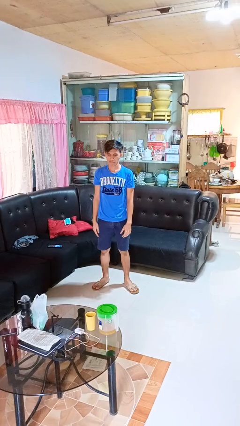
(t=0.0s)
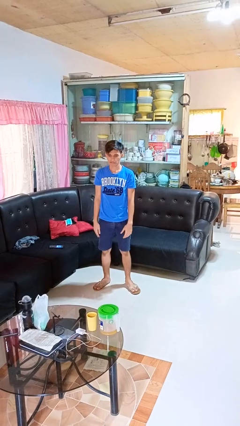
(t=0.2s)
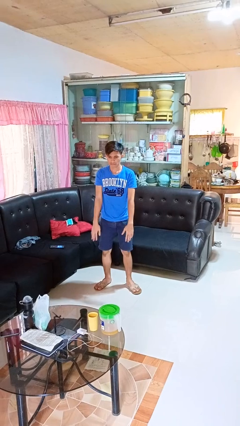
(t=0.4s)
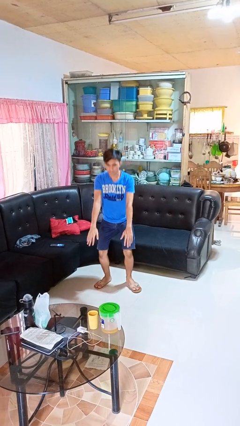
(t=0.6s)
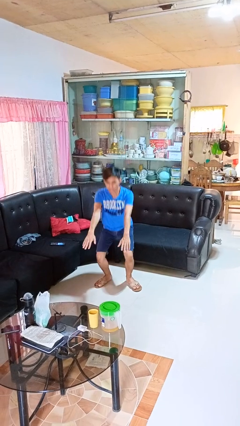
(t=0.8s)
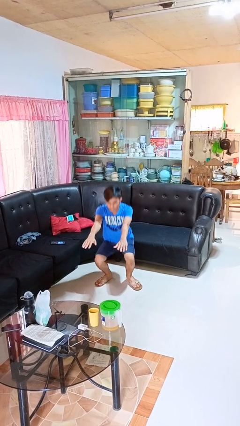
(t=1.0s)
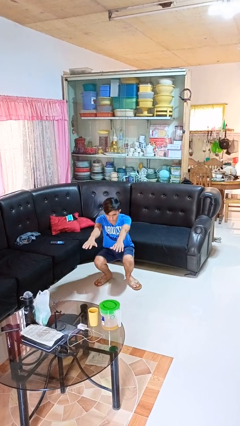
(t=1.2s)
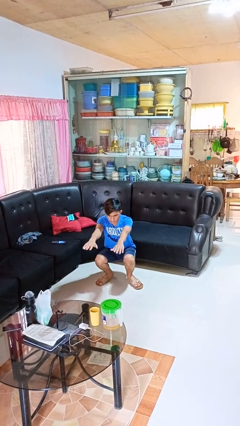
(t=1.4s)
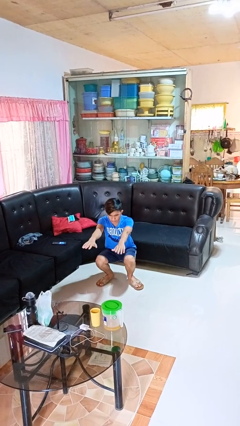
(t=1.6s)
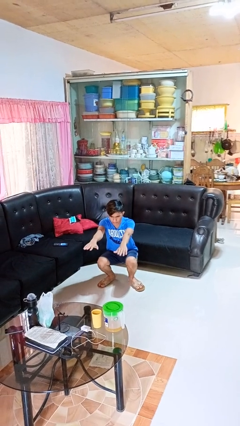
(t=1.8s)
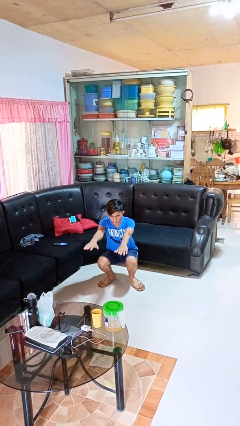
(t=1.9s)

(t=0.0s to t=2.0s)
person squats

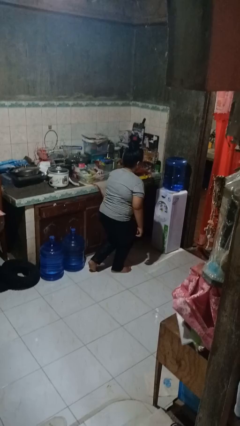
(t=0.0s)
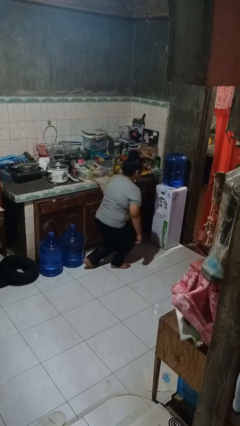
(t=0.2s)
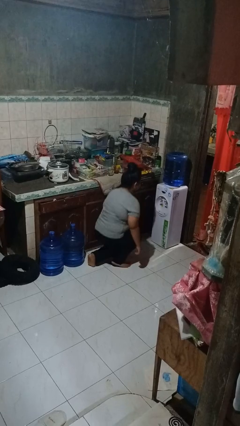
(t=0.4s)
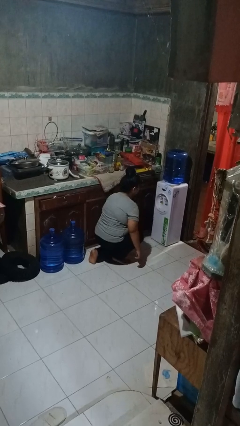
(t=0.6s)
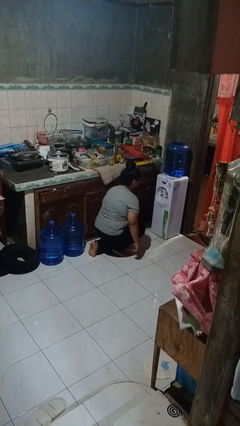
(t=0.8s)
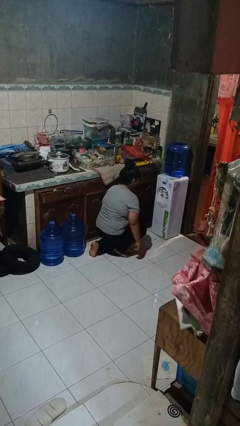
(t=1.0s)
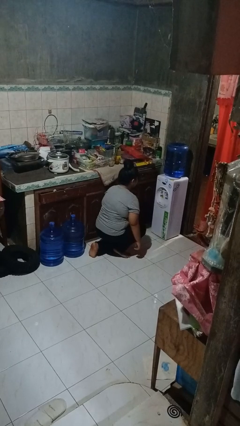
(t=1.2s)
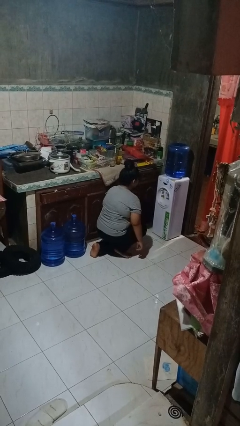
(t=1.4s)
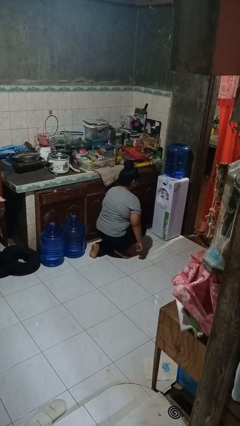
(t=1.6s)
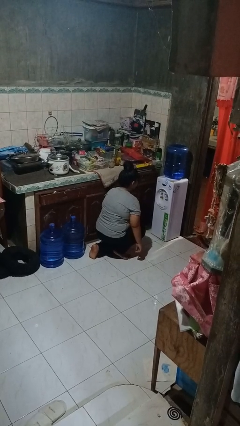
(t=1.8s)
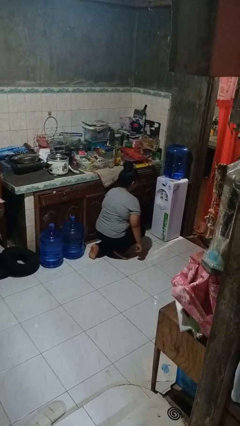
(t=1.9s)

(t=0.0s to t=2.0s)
person kneels

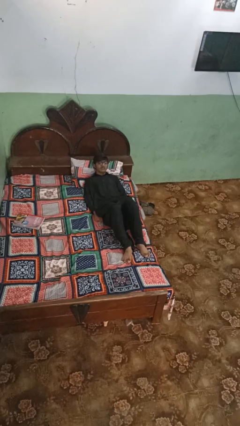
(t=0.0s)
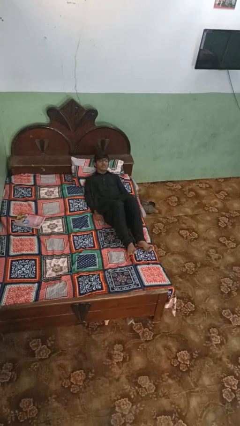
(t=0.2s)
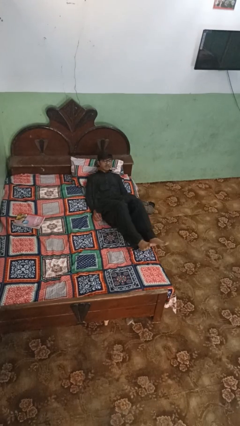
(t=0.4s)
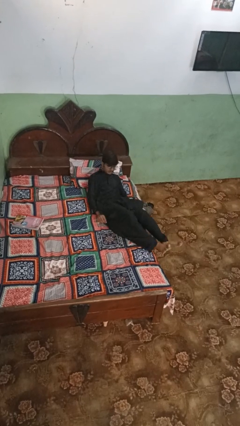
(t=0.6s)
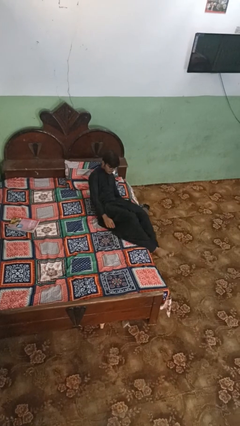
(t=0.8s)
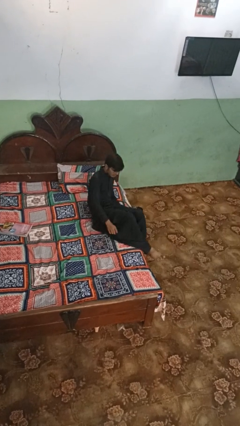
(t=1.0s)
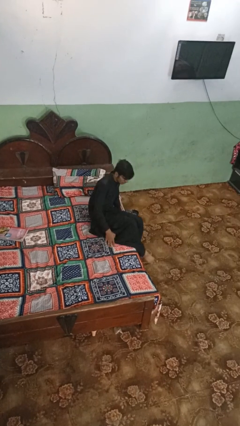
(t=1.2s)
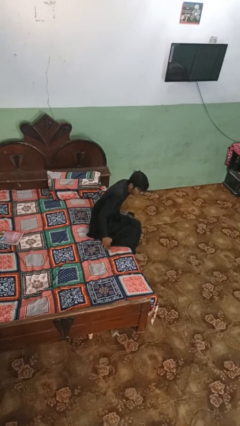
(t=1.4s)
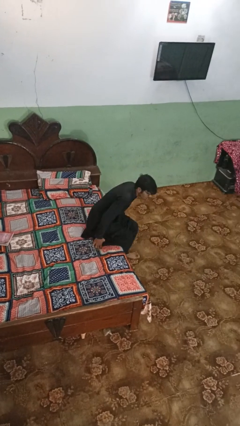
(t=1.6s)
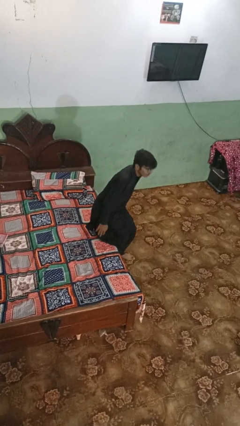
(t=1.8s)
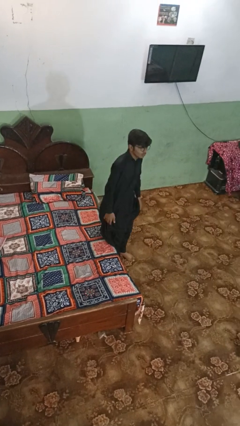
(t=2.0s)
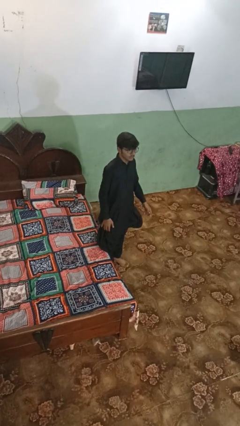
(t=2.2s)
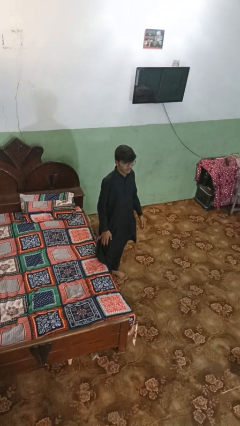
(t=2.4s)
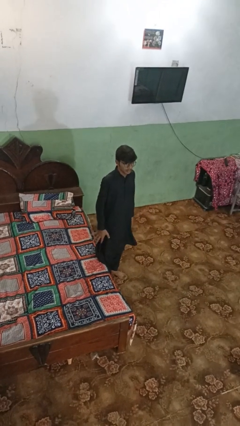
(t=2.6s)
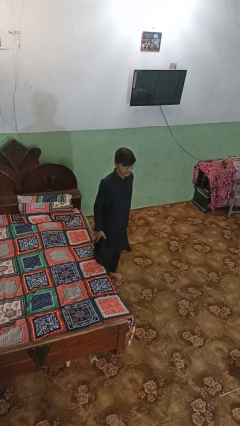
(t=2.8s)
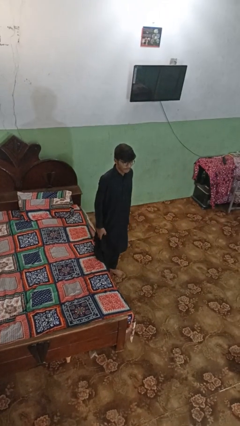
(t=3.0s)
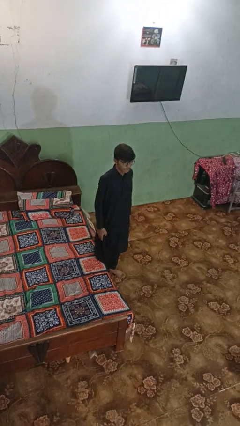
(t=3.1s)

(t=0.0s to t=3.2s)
person stands up

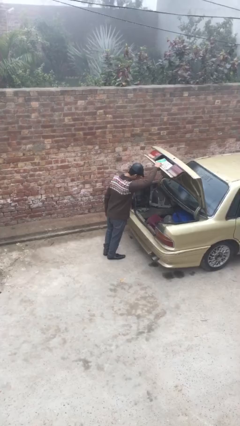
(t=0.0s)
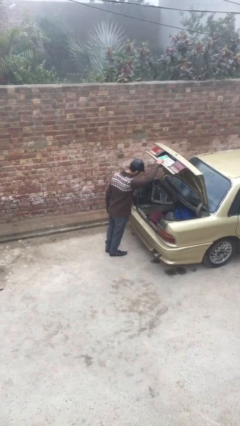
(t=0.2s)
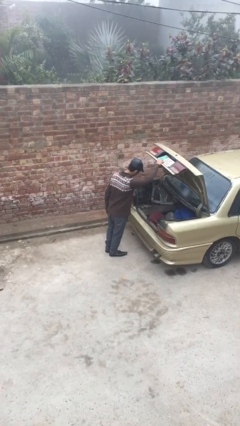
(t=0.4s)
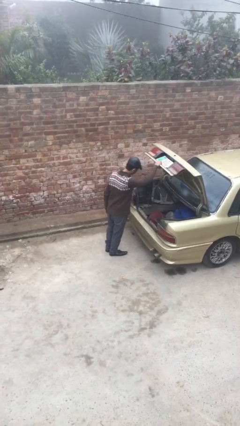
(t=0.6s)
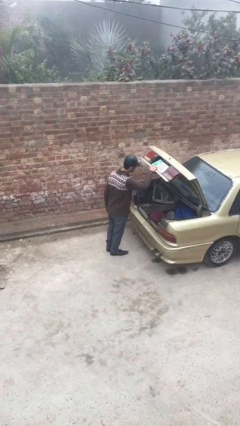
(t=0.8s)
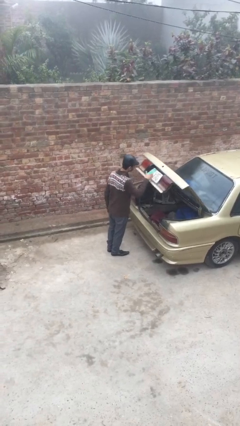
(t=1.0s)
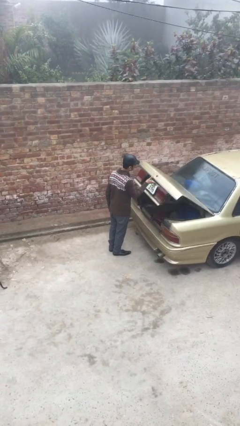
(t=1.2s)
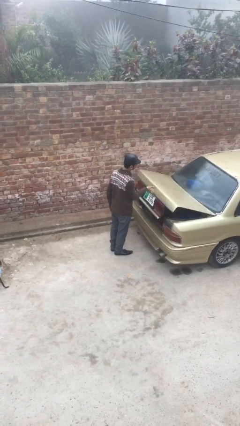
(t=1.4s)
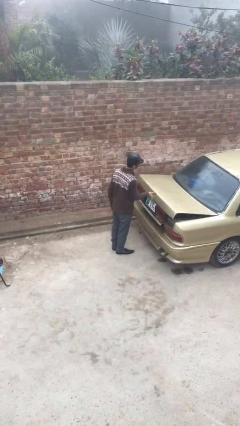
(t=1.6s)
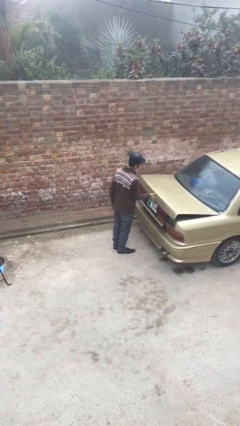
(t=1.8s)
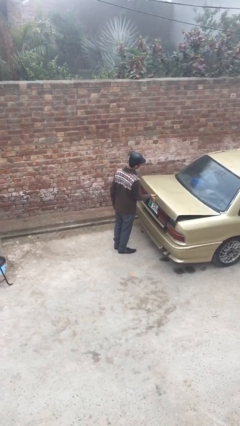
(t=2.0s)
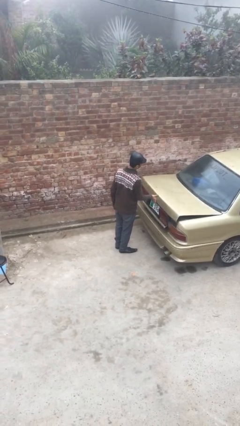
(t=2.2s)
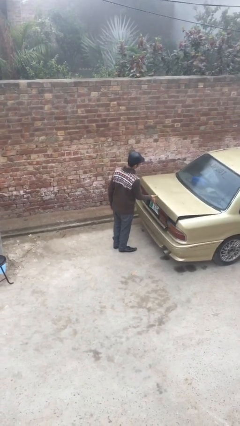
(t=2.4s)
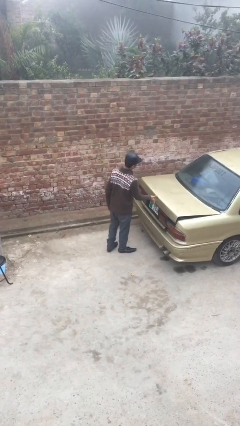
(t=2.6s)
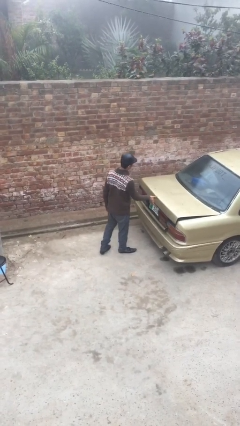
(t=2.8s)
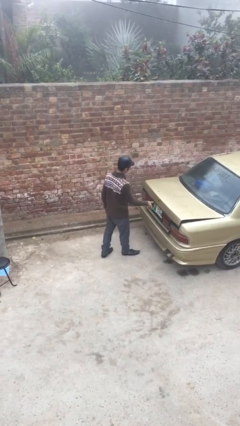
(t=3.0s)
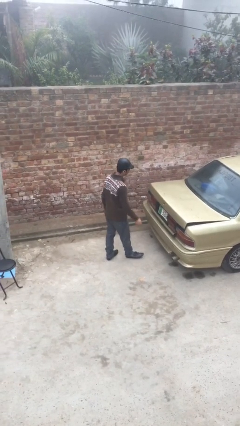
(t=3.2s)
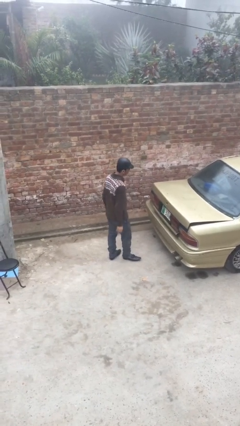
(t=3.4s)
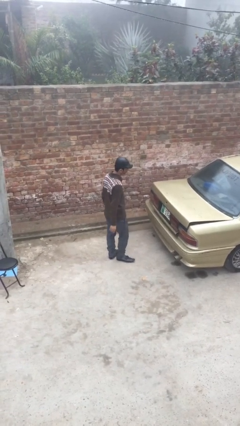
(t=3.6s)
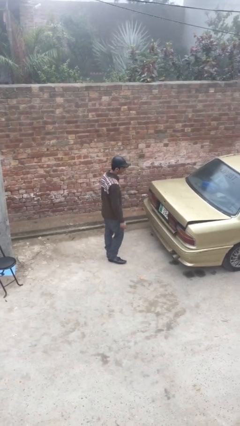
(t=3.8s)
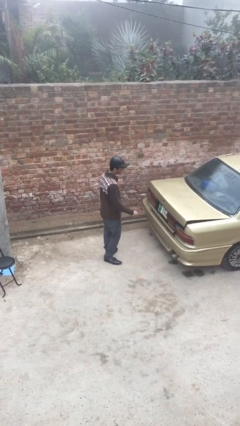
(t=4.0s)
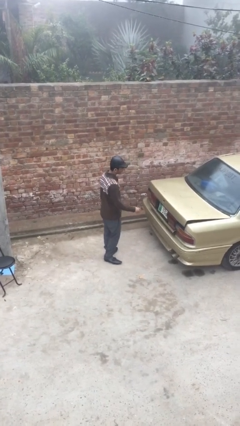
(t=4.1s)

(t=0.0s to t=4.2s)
person closes car trunk

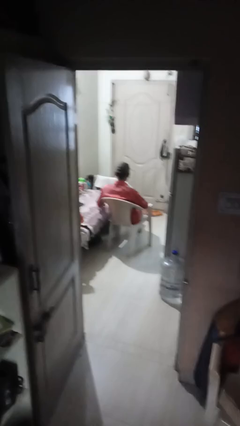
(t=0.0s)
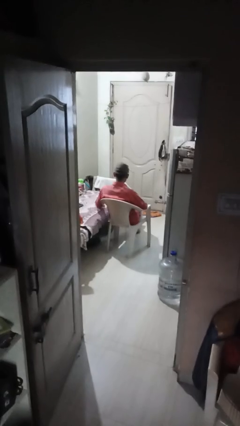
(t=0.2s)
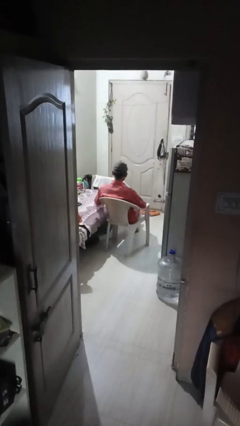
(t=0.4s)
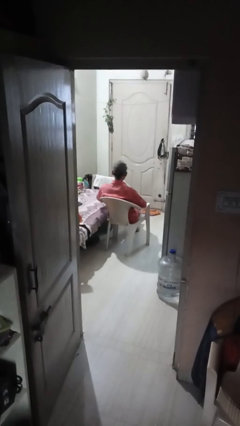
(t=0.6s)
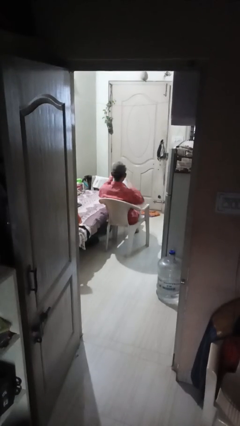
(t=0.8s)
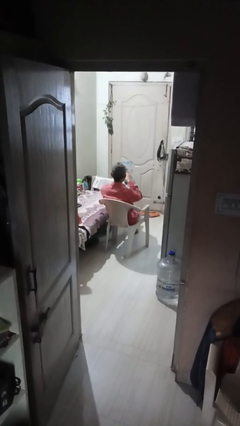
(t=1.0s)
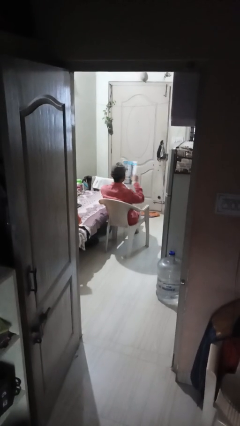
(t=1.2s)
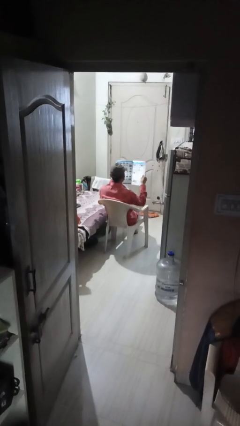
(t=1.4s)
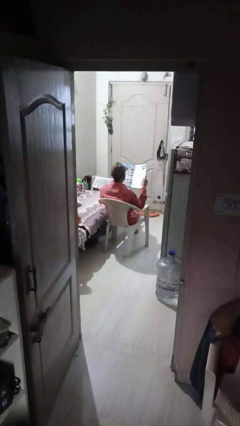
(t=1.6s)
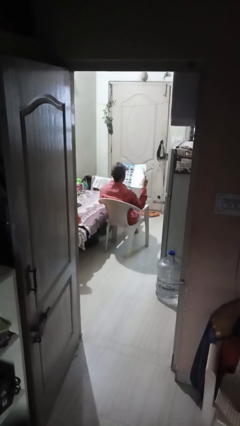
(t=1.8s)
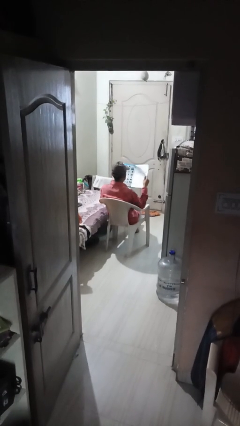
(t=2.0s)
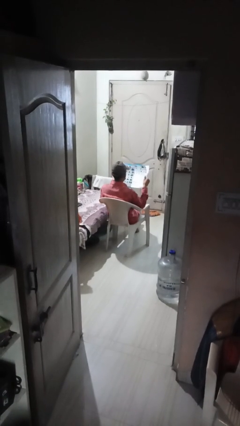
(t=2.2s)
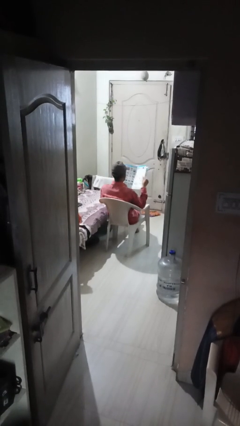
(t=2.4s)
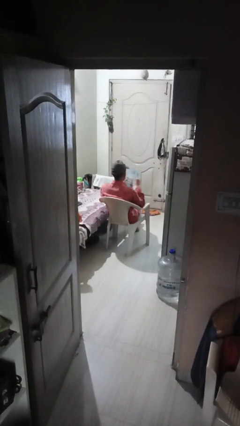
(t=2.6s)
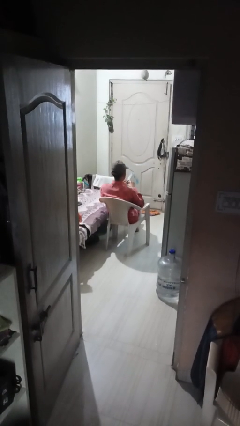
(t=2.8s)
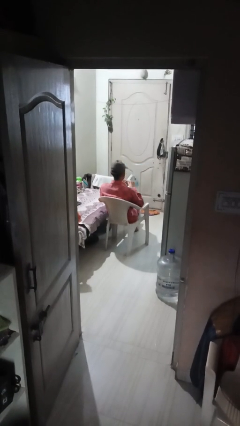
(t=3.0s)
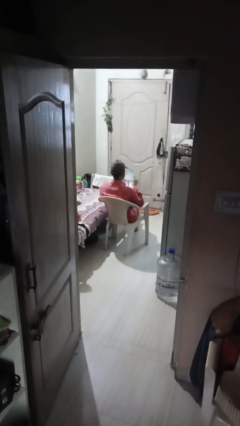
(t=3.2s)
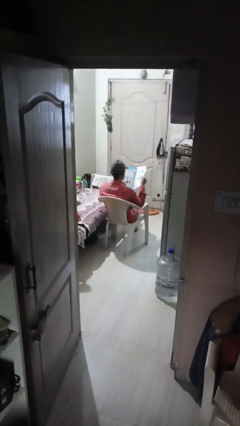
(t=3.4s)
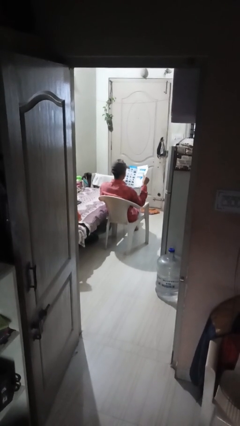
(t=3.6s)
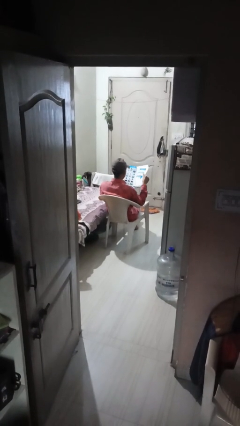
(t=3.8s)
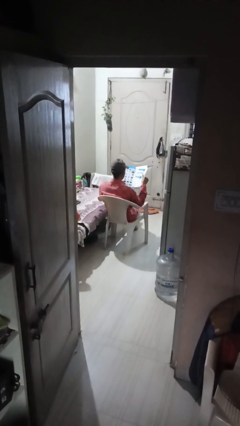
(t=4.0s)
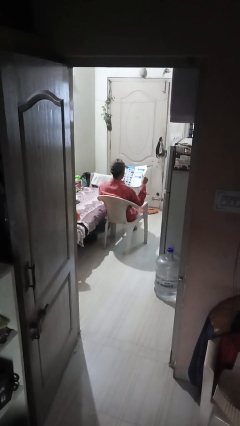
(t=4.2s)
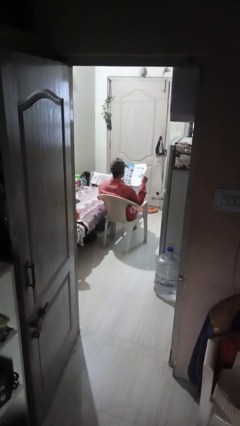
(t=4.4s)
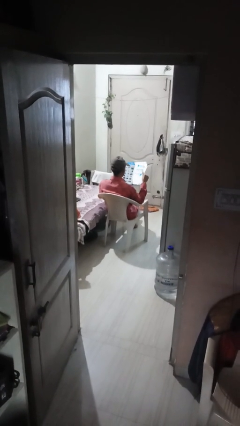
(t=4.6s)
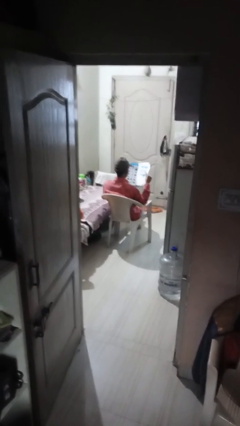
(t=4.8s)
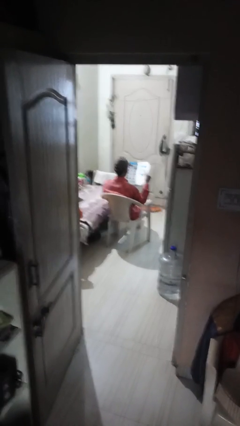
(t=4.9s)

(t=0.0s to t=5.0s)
person reads magazine

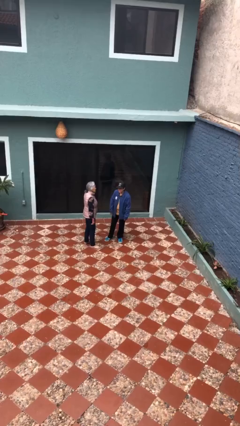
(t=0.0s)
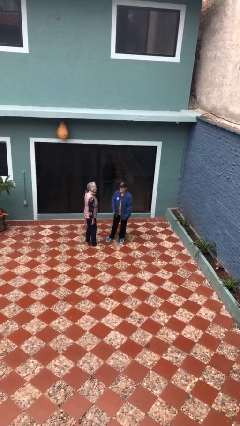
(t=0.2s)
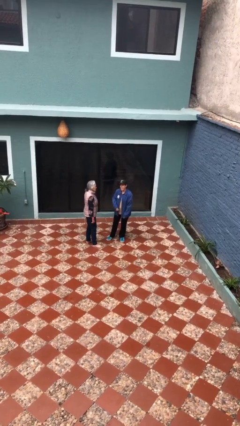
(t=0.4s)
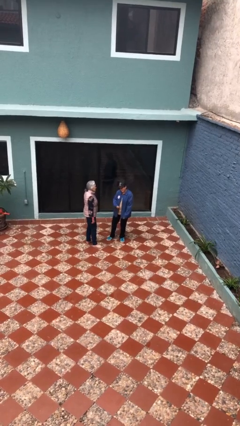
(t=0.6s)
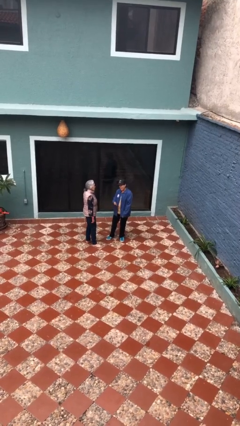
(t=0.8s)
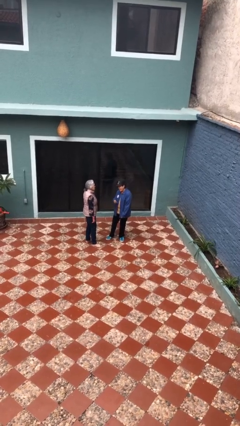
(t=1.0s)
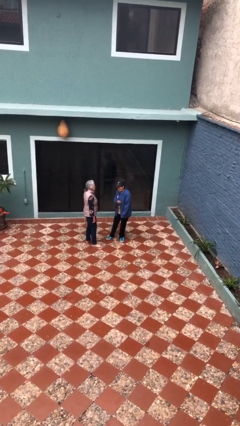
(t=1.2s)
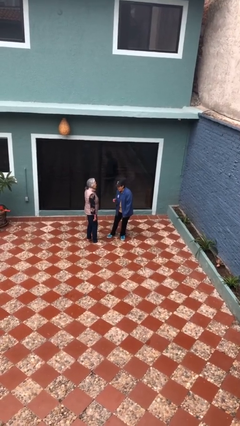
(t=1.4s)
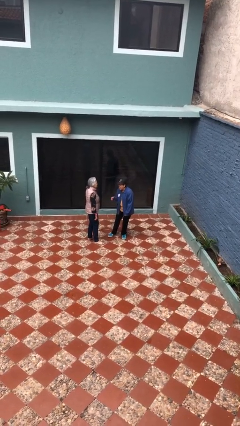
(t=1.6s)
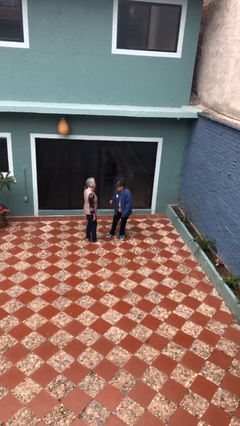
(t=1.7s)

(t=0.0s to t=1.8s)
person laughs with person
